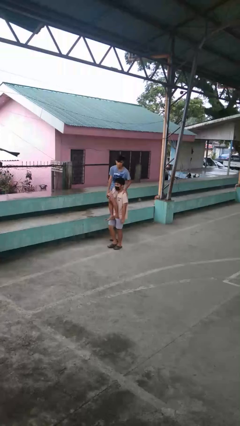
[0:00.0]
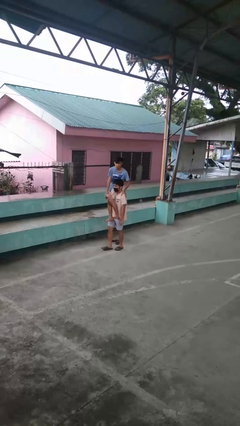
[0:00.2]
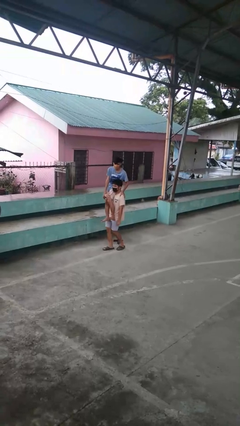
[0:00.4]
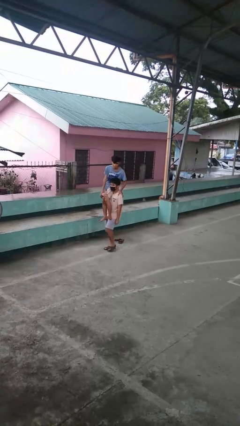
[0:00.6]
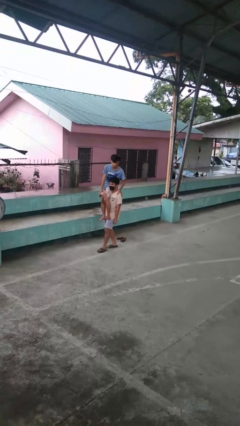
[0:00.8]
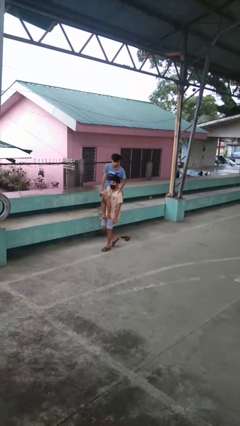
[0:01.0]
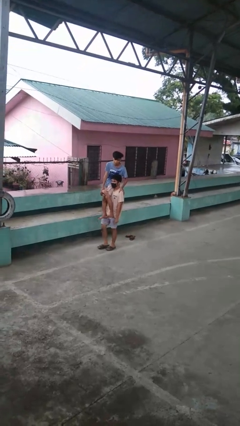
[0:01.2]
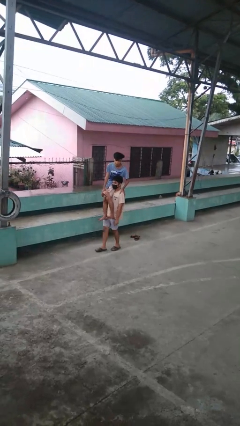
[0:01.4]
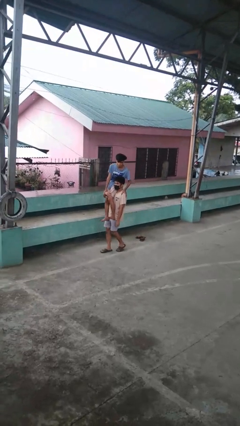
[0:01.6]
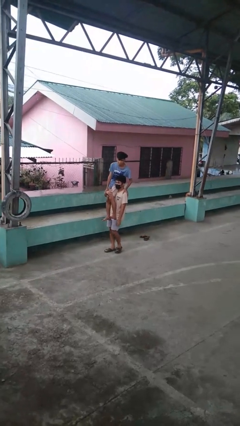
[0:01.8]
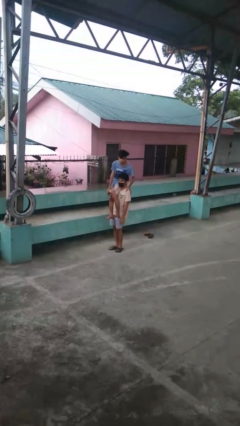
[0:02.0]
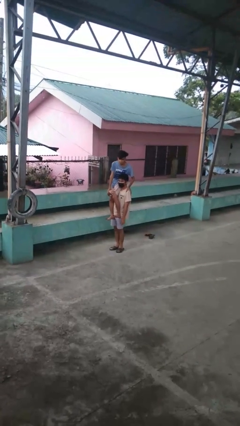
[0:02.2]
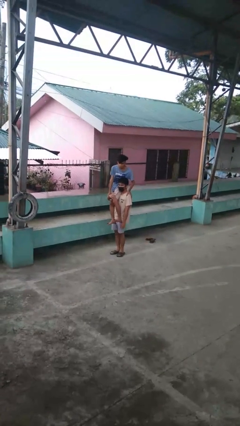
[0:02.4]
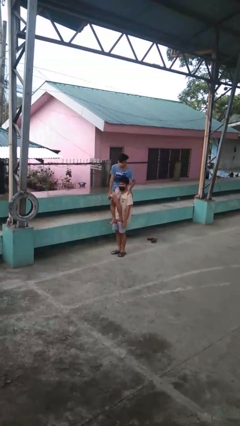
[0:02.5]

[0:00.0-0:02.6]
person carries person on shoulders

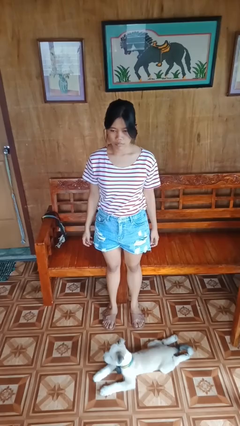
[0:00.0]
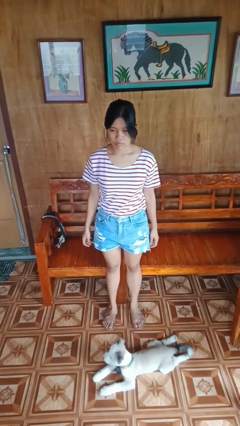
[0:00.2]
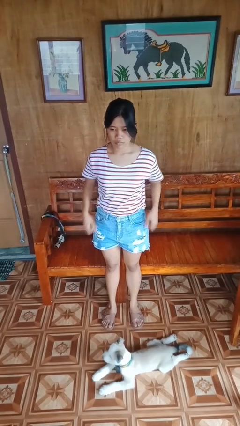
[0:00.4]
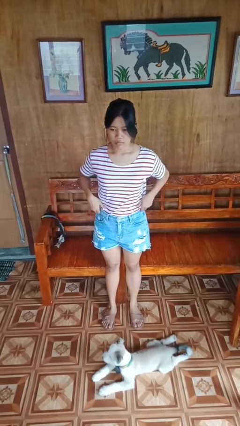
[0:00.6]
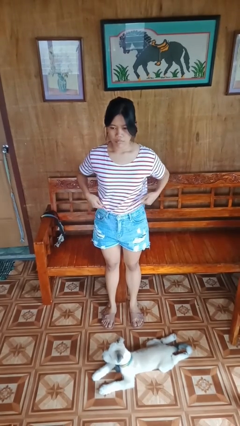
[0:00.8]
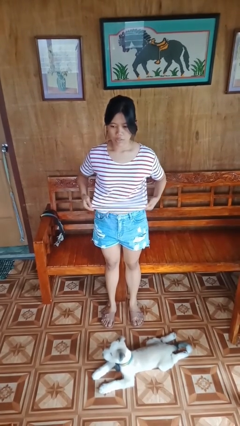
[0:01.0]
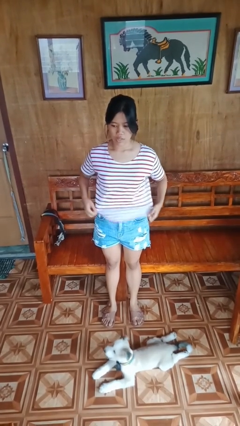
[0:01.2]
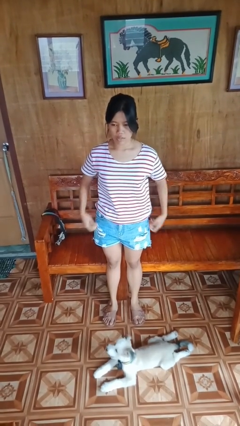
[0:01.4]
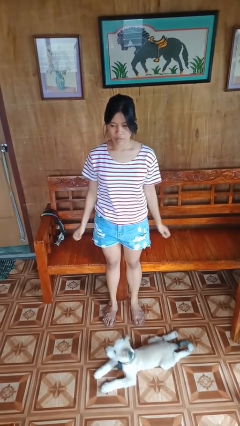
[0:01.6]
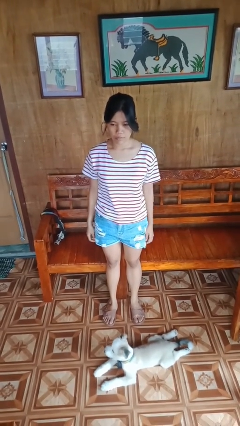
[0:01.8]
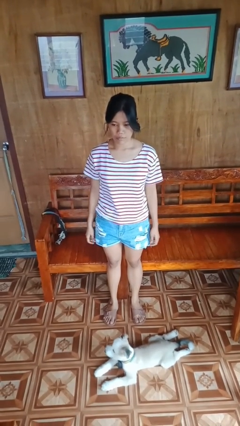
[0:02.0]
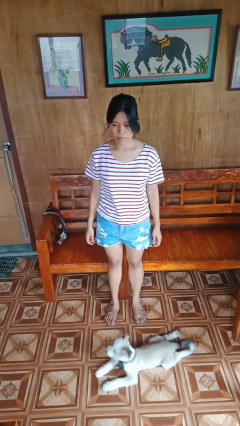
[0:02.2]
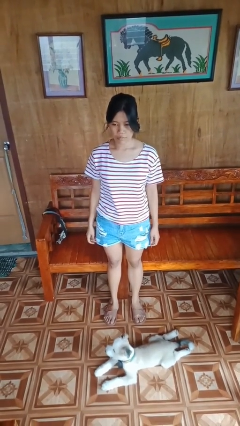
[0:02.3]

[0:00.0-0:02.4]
person untucks shirt

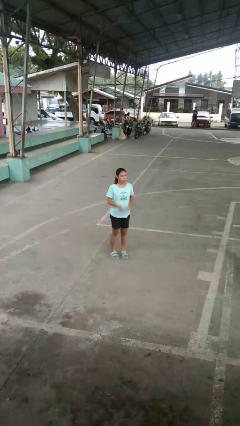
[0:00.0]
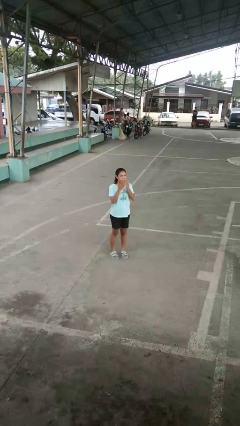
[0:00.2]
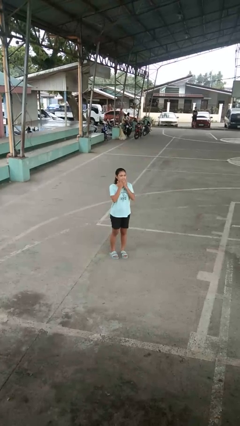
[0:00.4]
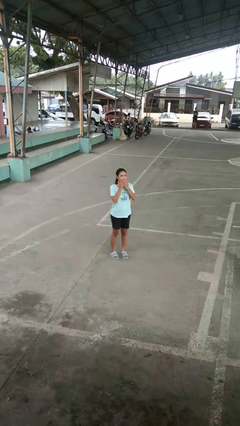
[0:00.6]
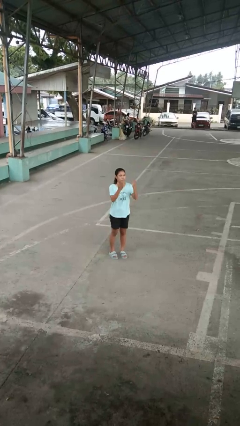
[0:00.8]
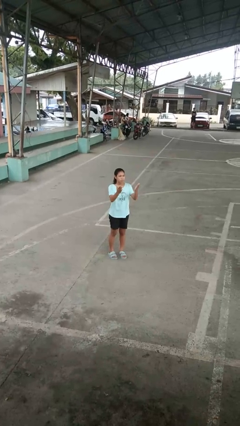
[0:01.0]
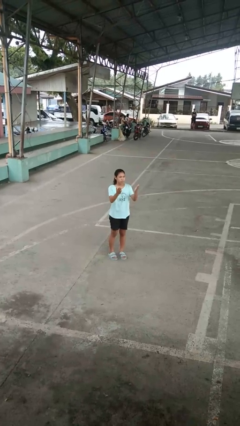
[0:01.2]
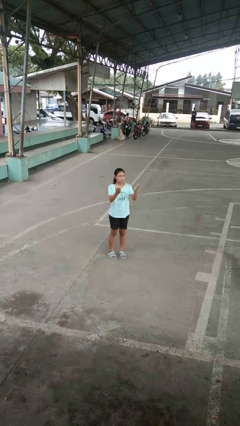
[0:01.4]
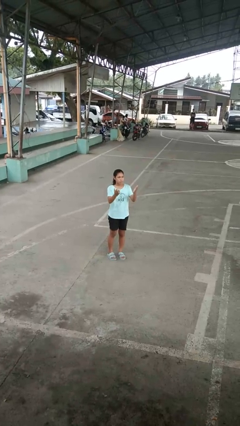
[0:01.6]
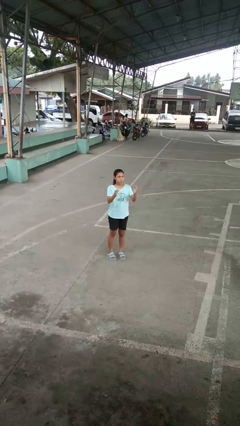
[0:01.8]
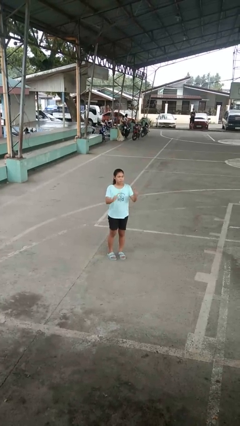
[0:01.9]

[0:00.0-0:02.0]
person gestures blow kiss

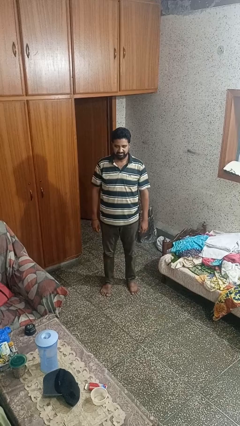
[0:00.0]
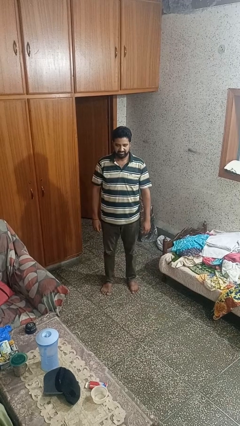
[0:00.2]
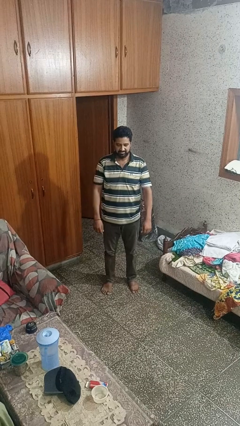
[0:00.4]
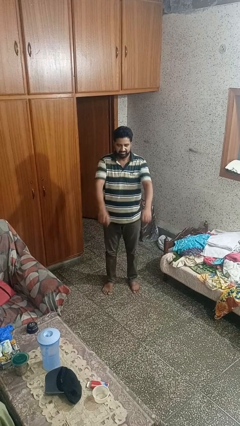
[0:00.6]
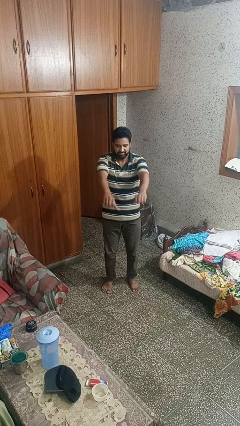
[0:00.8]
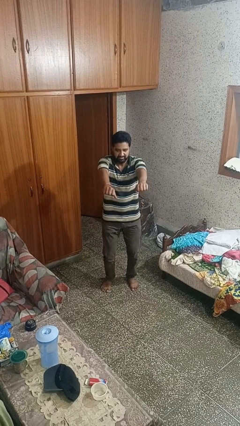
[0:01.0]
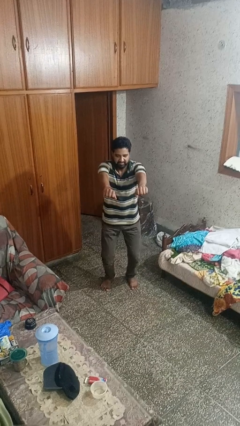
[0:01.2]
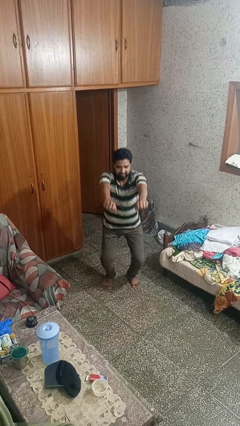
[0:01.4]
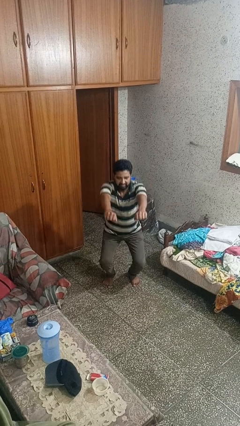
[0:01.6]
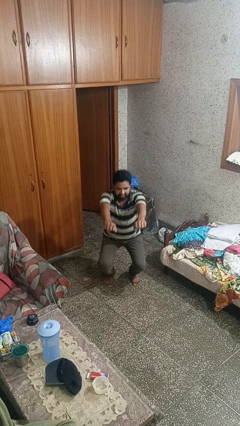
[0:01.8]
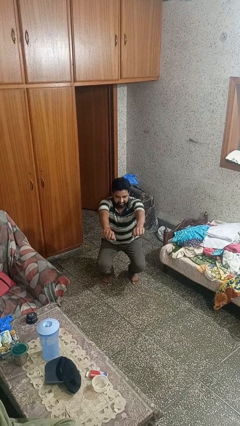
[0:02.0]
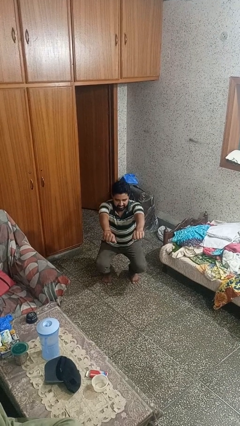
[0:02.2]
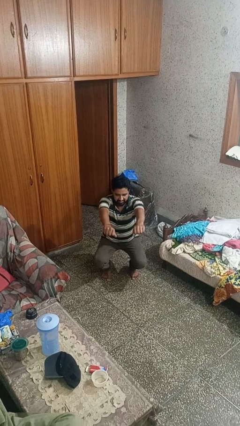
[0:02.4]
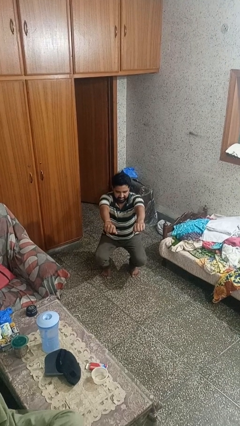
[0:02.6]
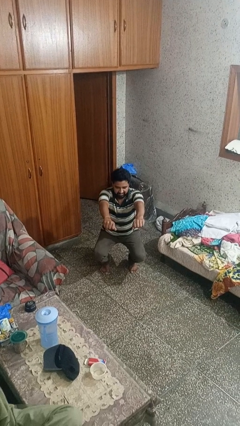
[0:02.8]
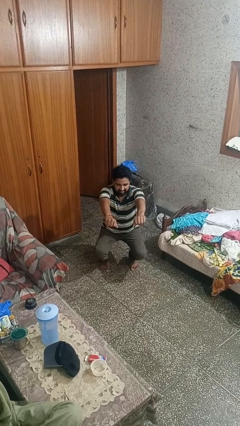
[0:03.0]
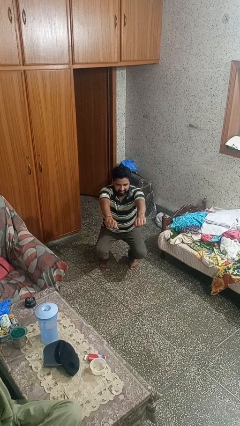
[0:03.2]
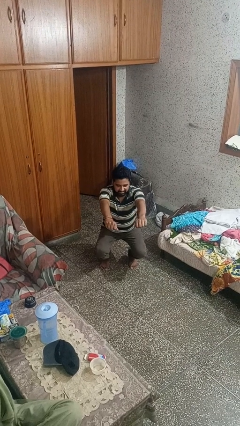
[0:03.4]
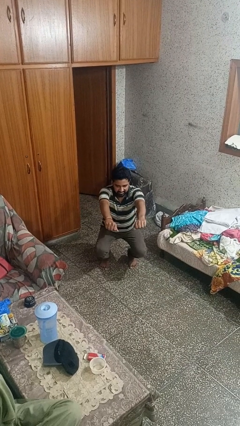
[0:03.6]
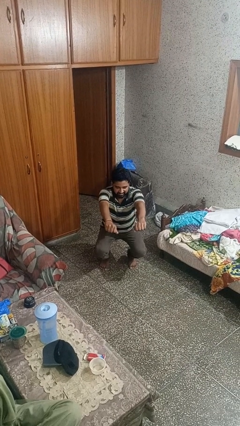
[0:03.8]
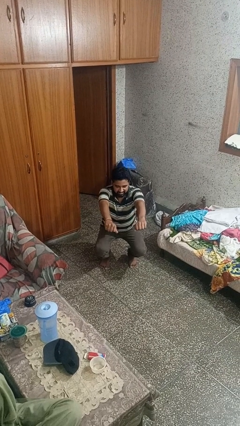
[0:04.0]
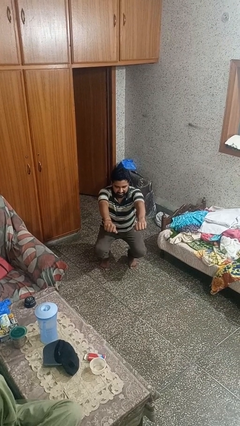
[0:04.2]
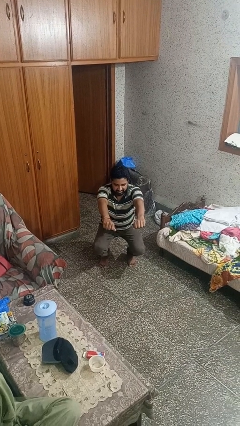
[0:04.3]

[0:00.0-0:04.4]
person squats

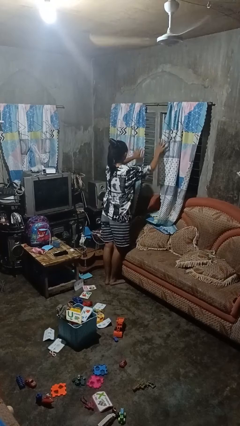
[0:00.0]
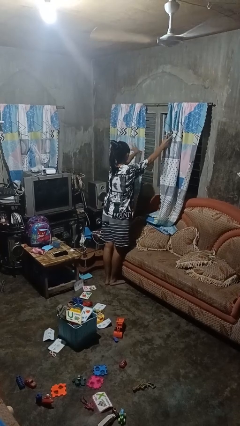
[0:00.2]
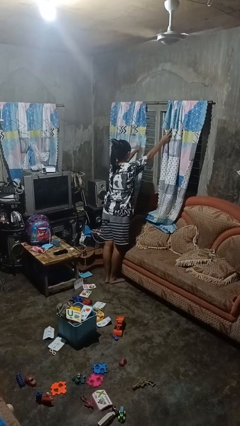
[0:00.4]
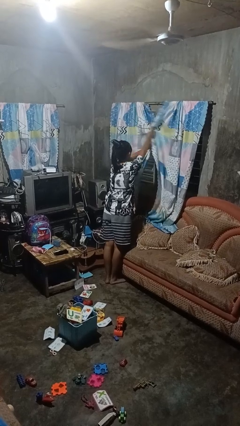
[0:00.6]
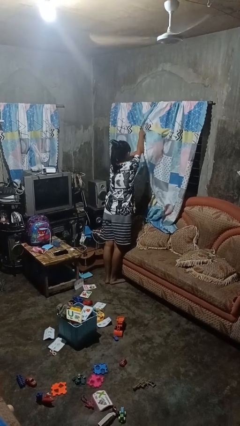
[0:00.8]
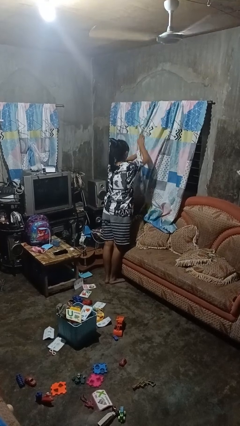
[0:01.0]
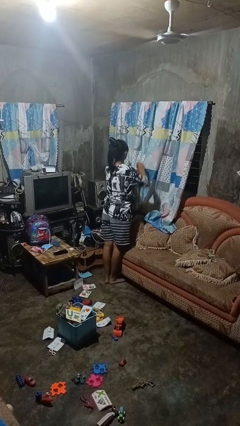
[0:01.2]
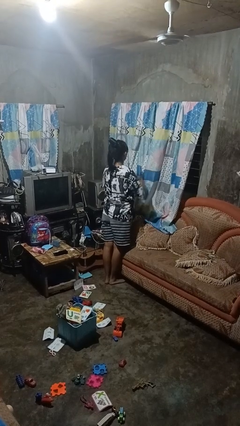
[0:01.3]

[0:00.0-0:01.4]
person closes curtains

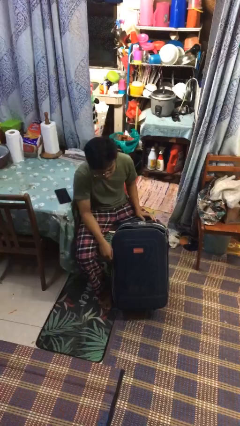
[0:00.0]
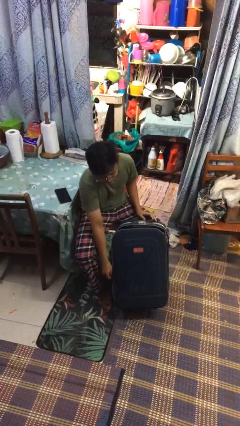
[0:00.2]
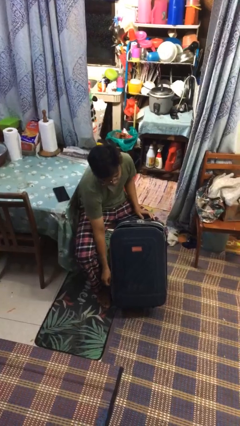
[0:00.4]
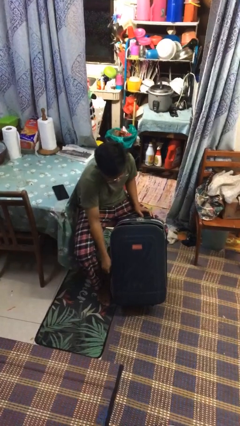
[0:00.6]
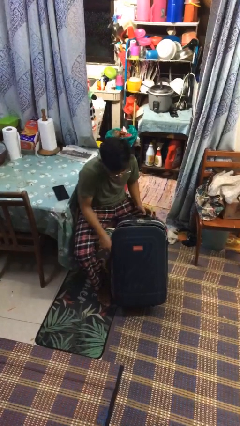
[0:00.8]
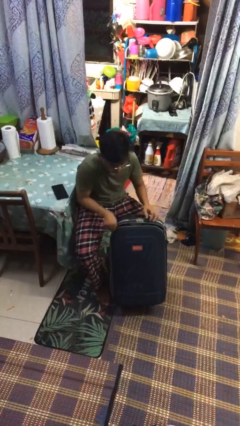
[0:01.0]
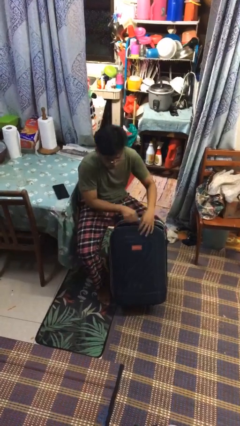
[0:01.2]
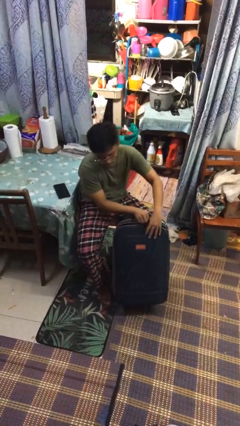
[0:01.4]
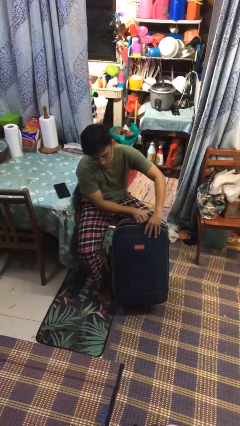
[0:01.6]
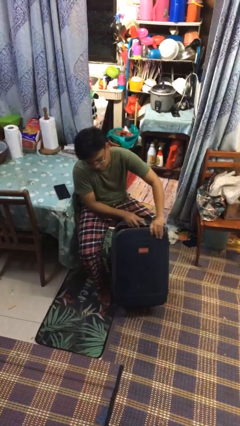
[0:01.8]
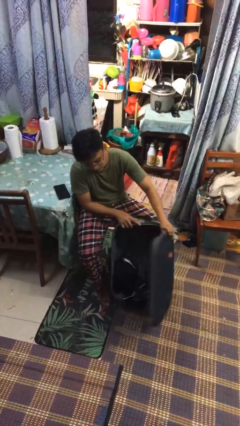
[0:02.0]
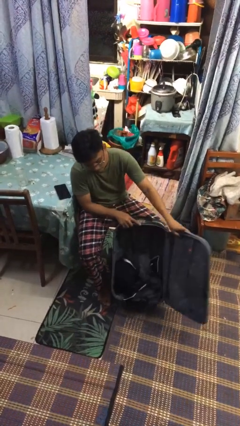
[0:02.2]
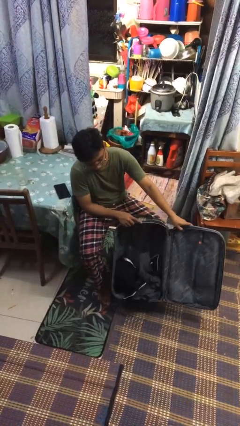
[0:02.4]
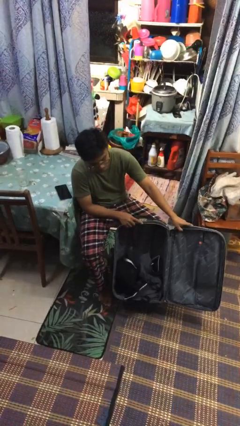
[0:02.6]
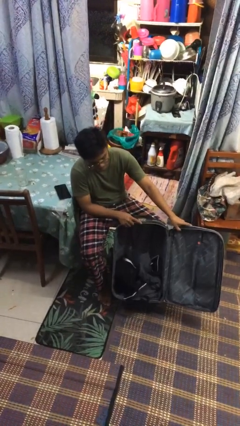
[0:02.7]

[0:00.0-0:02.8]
person opens suitcase

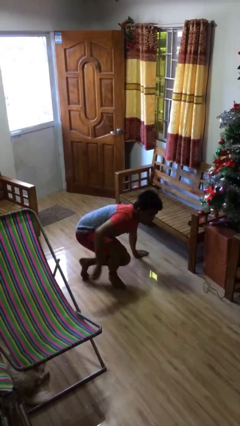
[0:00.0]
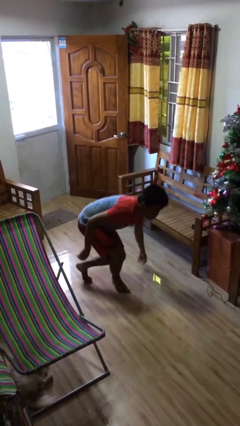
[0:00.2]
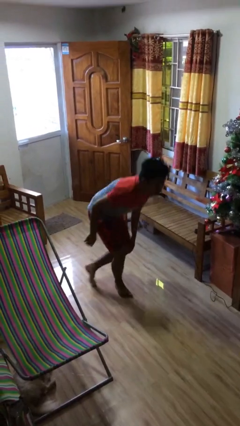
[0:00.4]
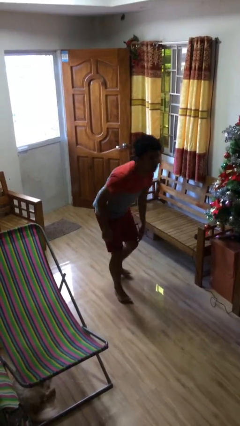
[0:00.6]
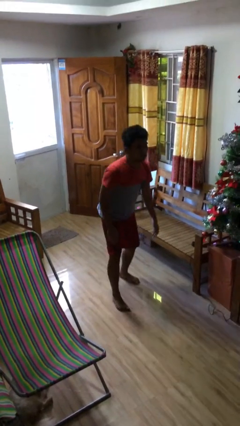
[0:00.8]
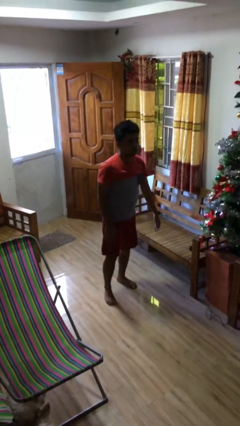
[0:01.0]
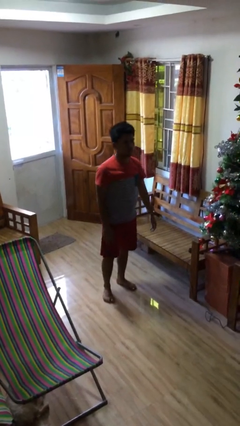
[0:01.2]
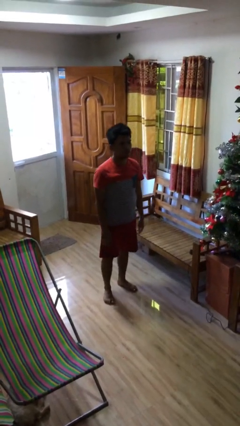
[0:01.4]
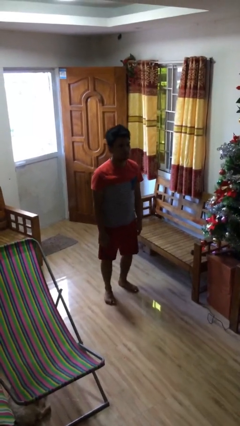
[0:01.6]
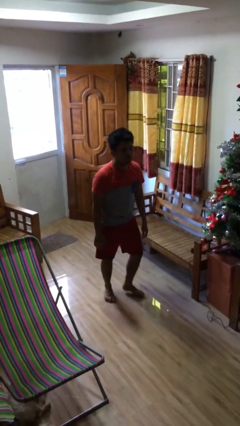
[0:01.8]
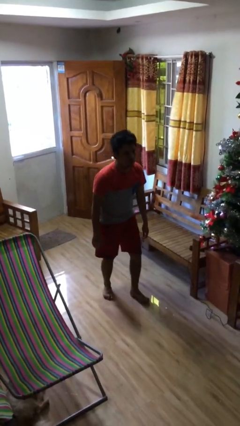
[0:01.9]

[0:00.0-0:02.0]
person stands up
